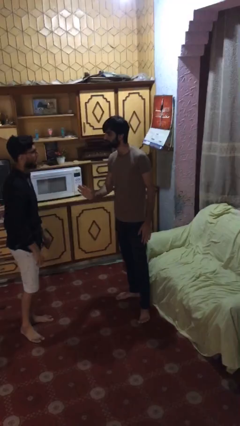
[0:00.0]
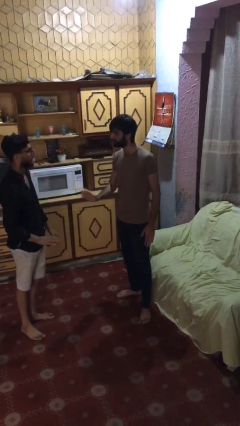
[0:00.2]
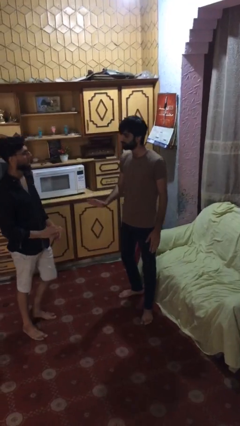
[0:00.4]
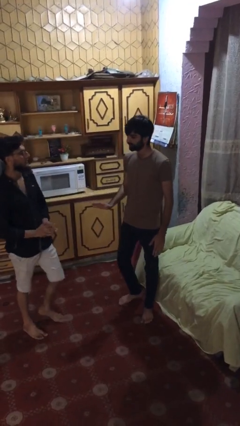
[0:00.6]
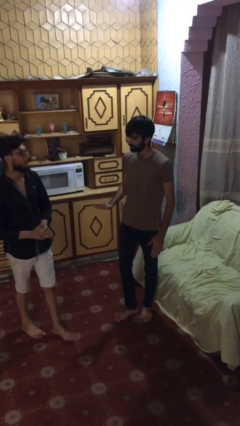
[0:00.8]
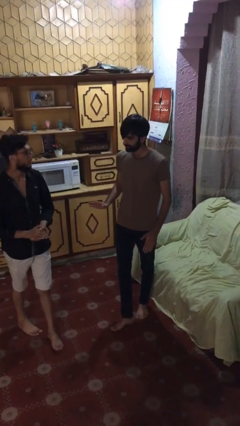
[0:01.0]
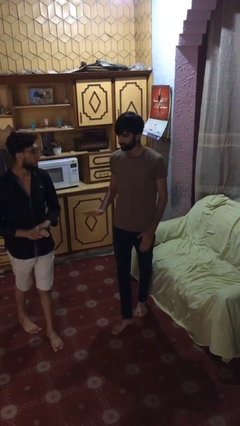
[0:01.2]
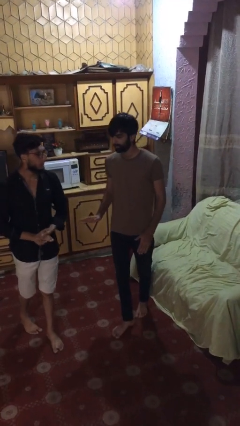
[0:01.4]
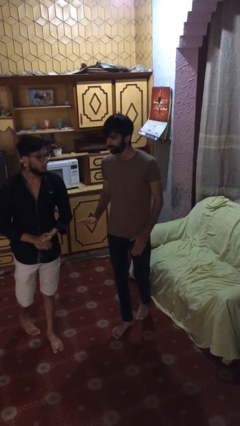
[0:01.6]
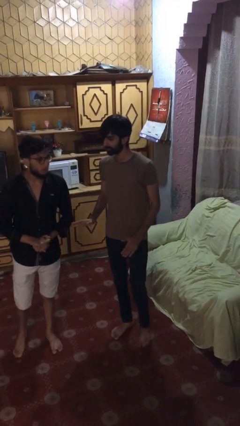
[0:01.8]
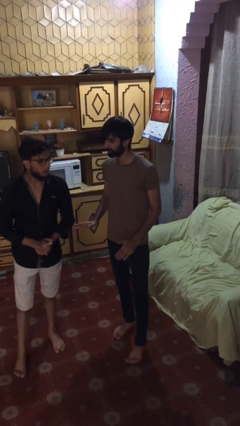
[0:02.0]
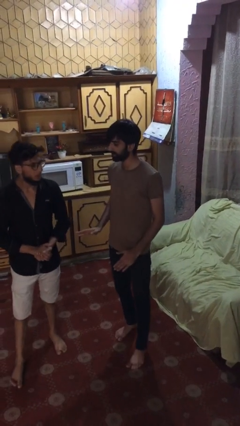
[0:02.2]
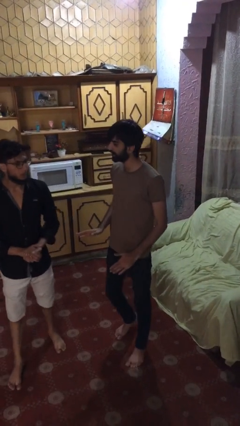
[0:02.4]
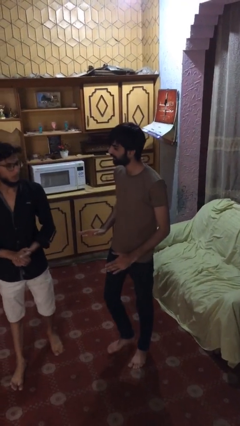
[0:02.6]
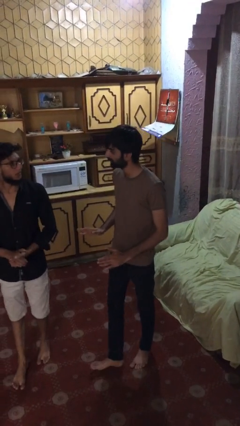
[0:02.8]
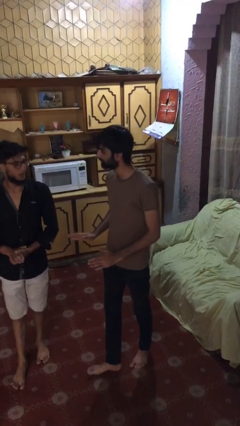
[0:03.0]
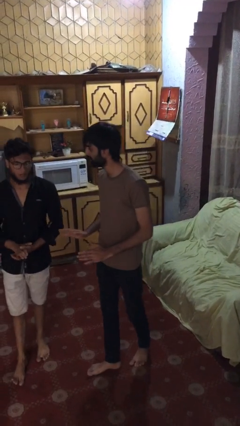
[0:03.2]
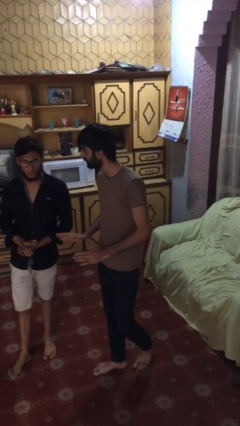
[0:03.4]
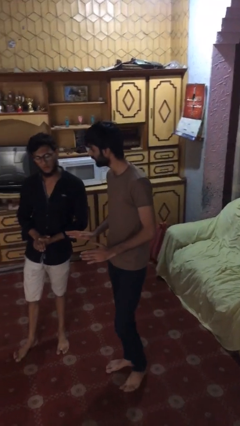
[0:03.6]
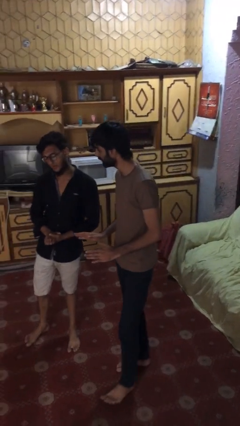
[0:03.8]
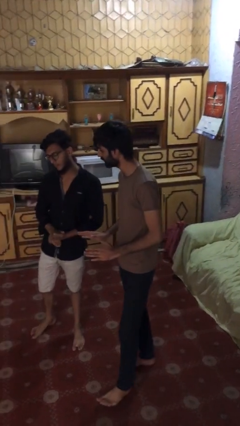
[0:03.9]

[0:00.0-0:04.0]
person talks to person

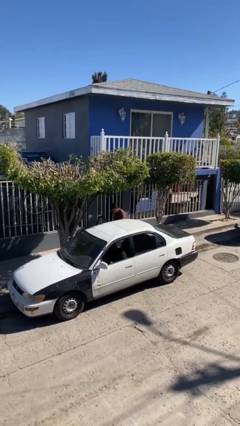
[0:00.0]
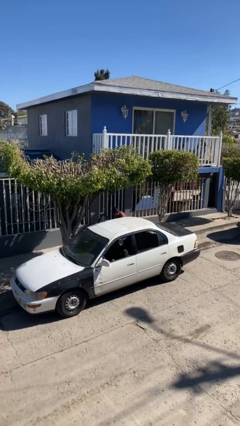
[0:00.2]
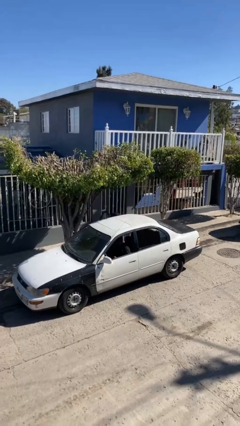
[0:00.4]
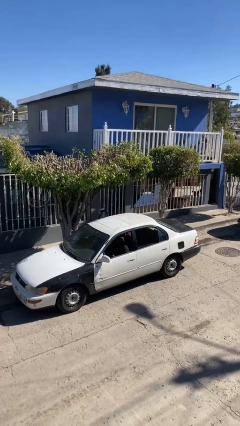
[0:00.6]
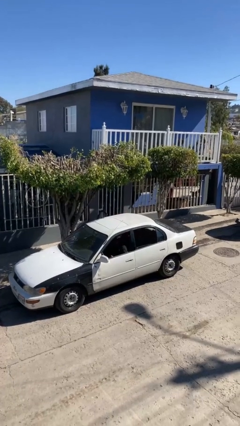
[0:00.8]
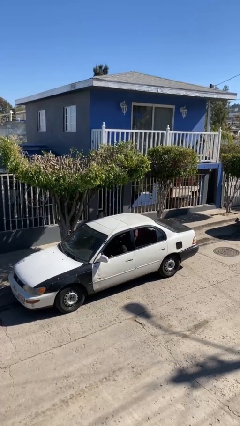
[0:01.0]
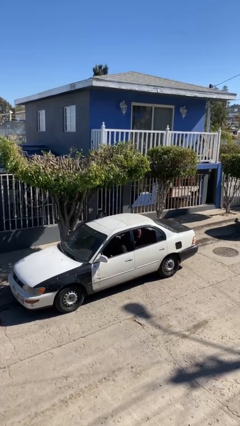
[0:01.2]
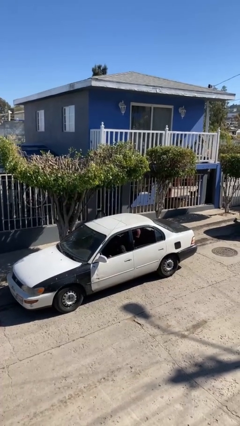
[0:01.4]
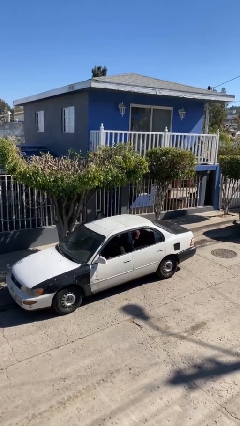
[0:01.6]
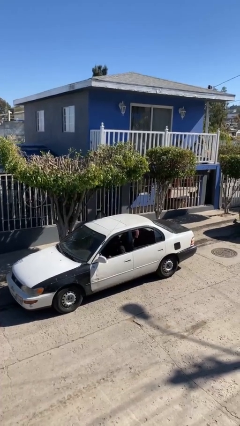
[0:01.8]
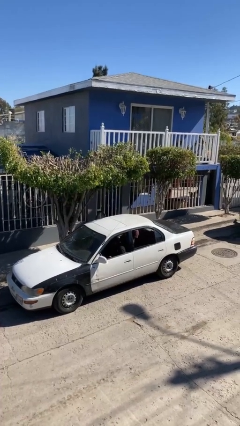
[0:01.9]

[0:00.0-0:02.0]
person enters car

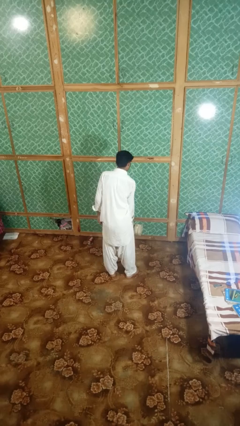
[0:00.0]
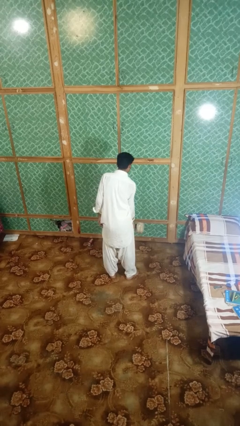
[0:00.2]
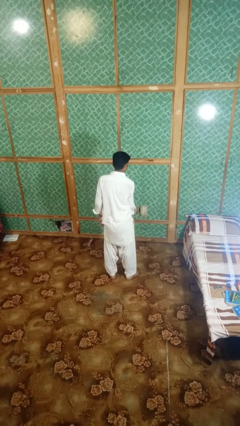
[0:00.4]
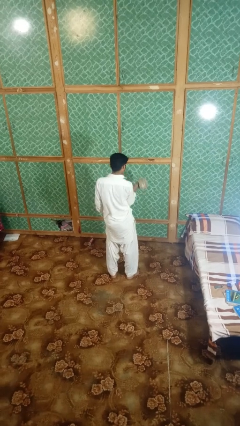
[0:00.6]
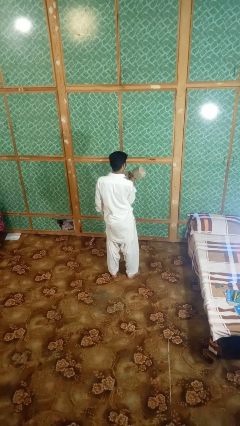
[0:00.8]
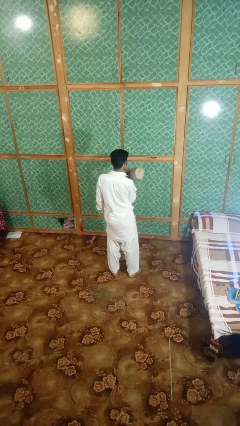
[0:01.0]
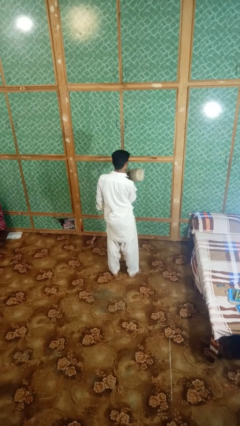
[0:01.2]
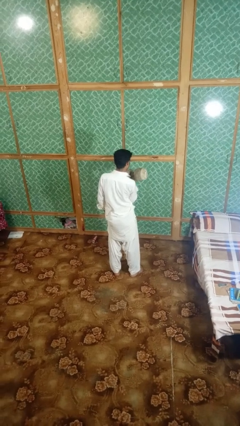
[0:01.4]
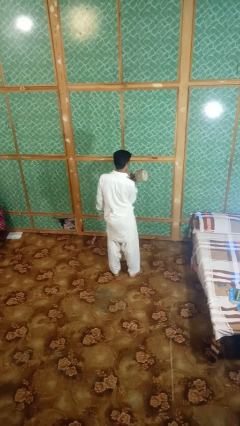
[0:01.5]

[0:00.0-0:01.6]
person lifts dumbbells

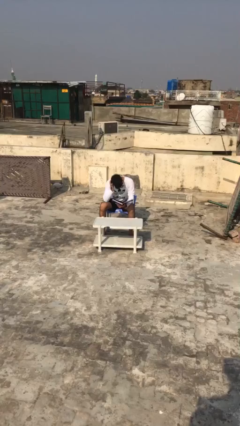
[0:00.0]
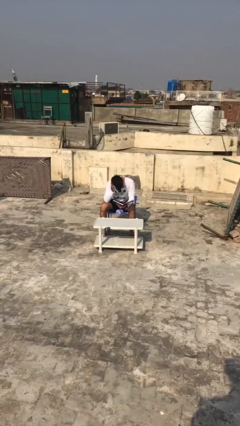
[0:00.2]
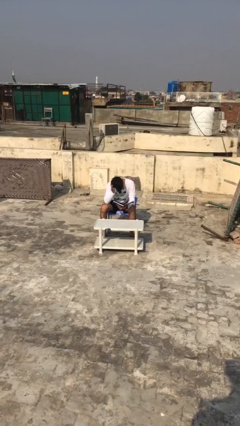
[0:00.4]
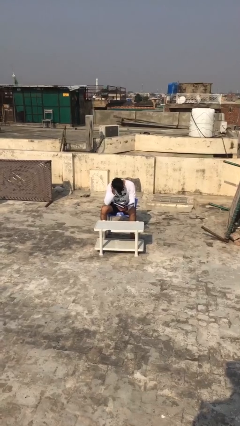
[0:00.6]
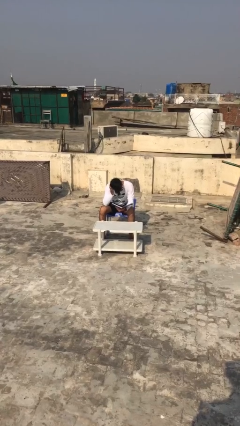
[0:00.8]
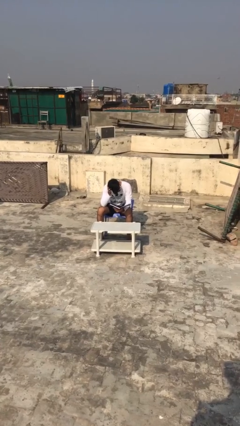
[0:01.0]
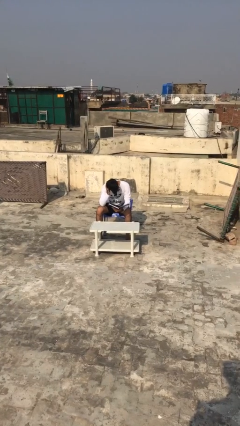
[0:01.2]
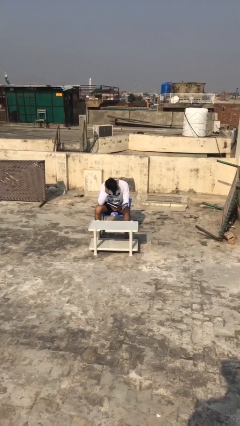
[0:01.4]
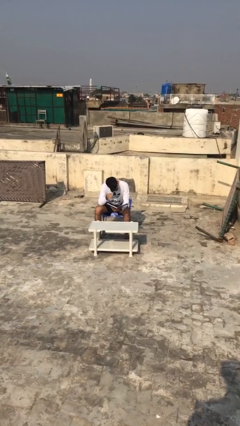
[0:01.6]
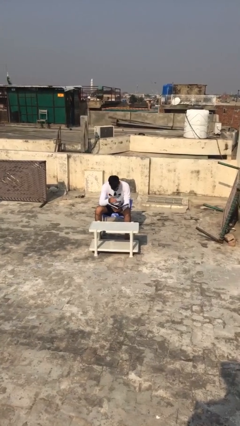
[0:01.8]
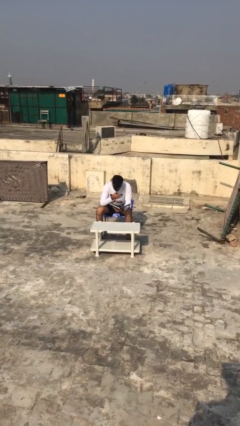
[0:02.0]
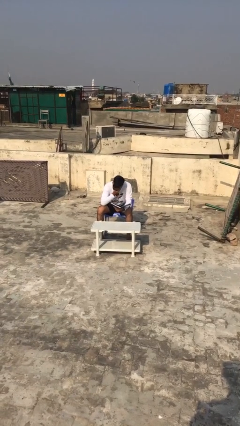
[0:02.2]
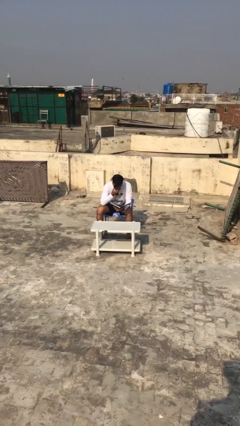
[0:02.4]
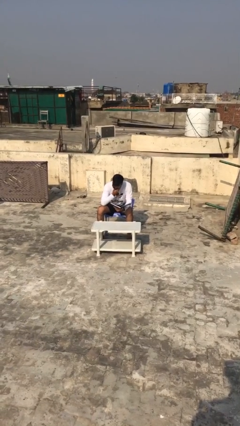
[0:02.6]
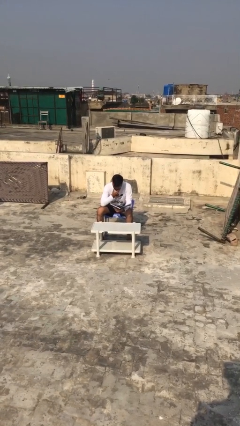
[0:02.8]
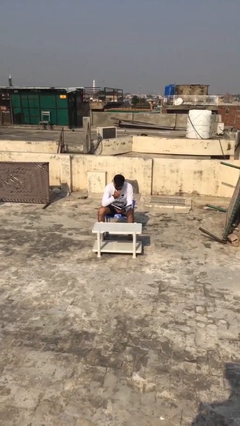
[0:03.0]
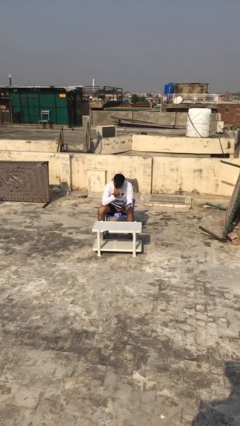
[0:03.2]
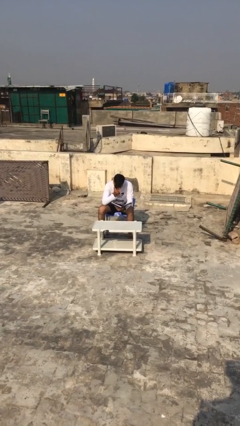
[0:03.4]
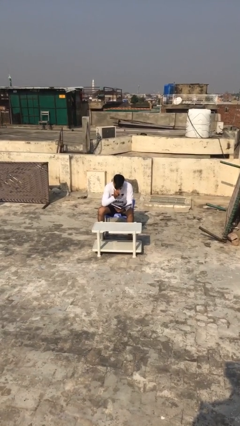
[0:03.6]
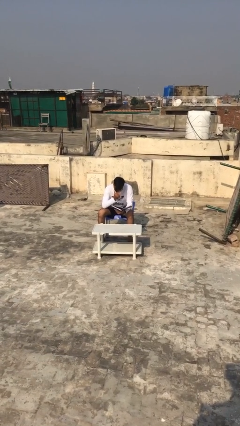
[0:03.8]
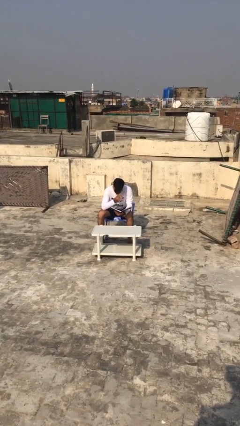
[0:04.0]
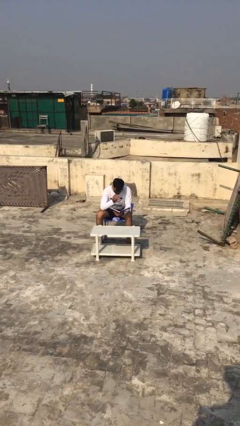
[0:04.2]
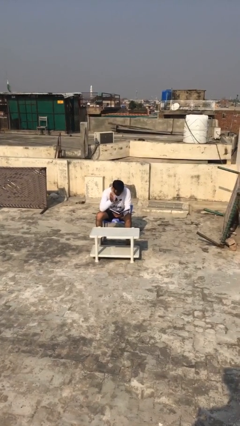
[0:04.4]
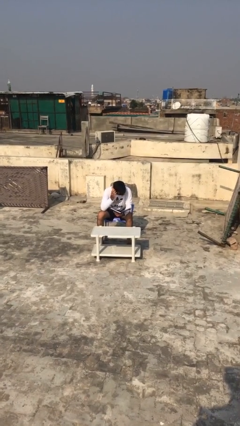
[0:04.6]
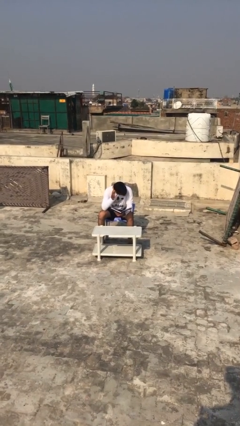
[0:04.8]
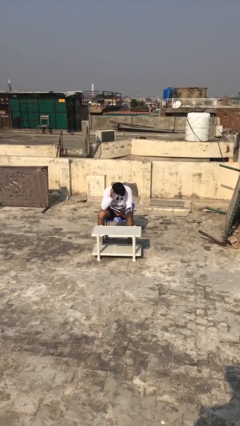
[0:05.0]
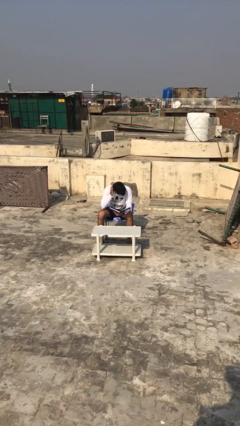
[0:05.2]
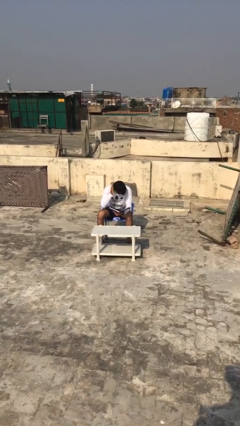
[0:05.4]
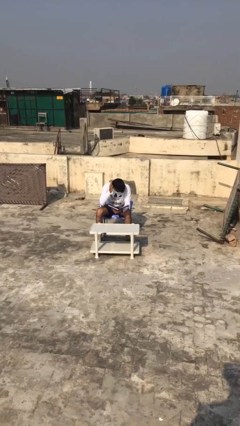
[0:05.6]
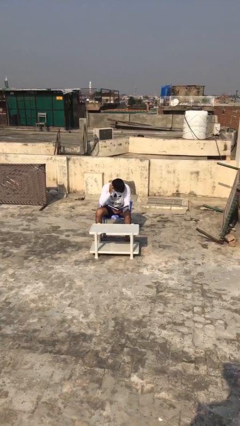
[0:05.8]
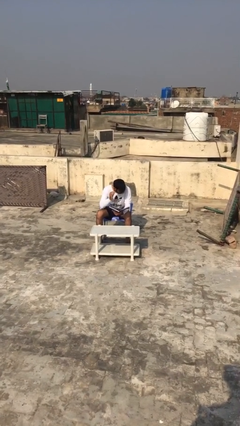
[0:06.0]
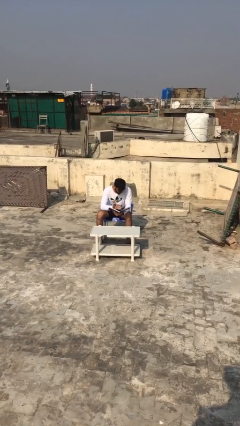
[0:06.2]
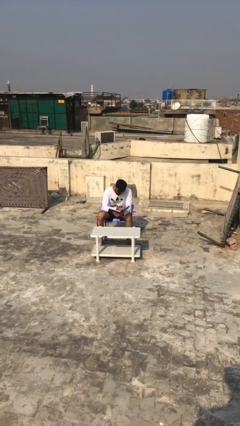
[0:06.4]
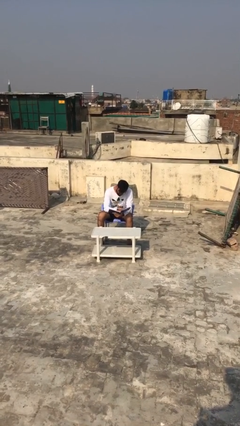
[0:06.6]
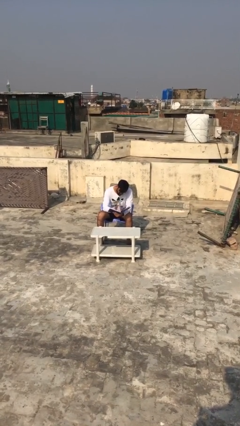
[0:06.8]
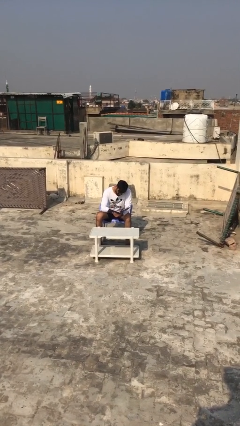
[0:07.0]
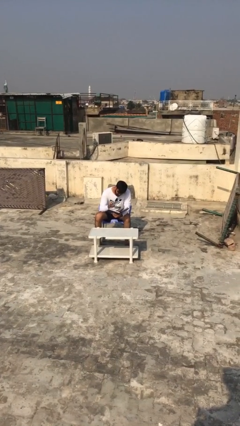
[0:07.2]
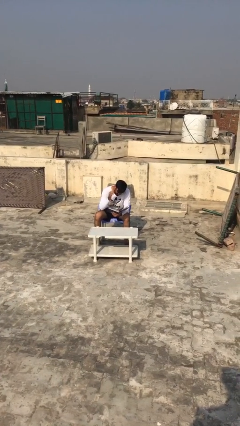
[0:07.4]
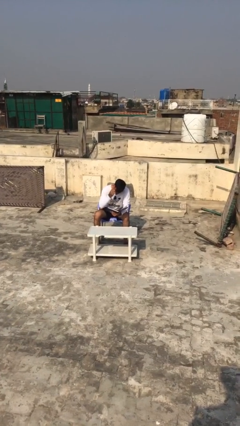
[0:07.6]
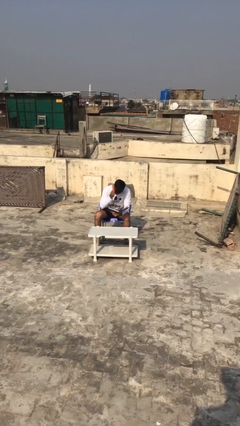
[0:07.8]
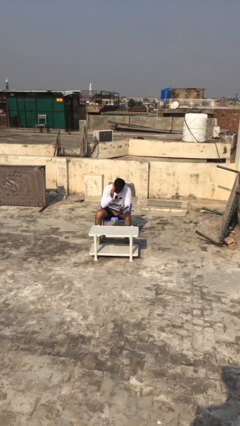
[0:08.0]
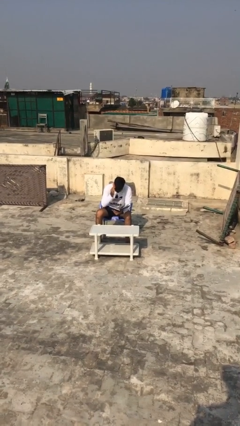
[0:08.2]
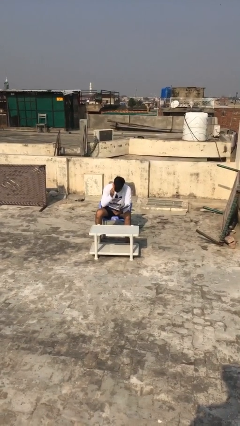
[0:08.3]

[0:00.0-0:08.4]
person reads document

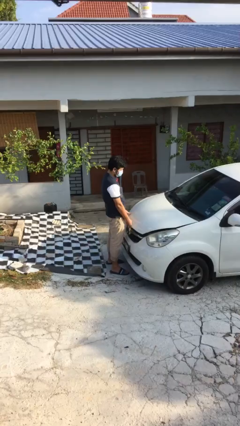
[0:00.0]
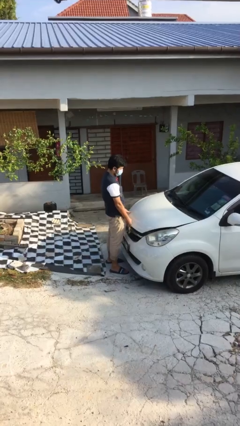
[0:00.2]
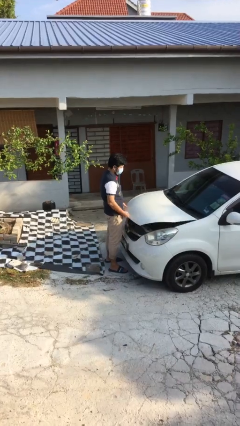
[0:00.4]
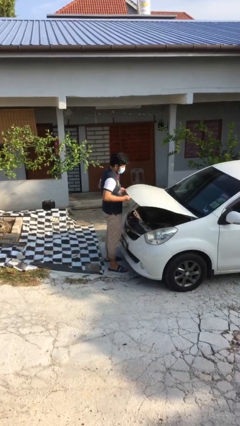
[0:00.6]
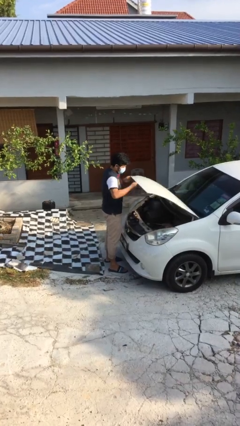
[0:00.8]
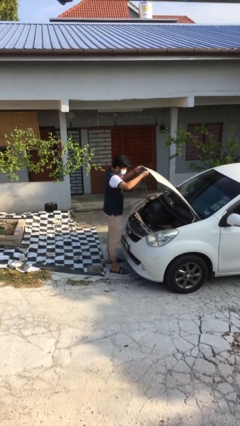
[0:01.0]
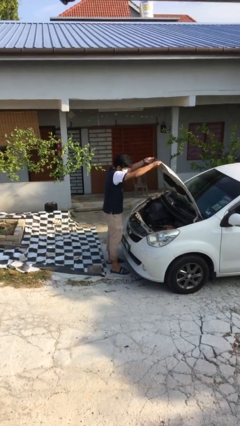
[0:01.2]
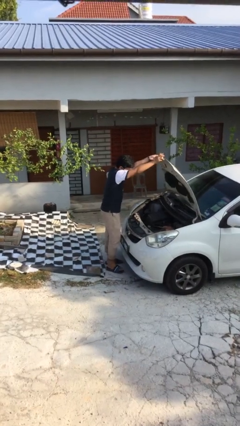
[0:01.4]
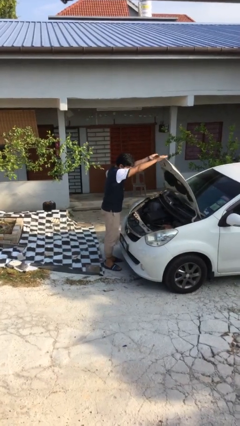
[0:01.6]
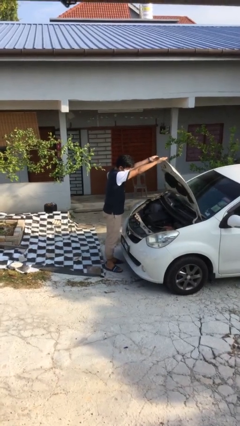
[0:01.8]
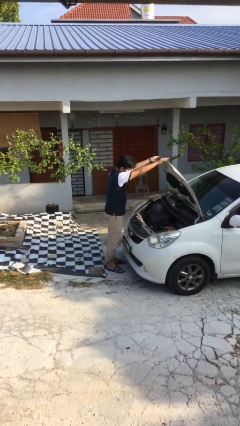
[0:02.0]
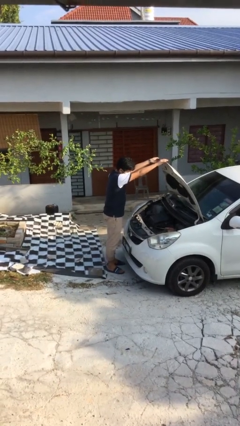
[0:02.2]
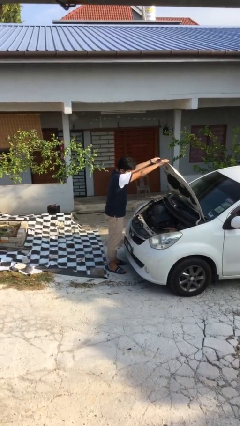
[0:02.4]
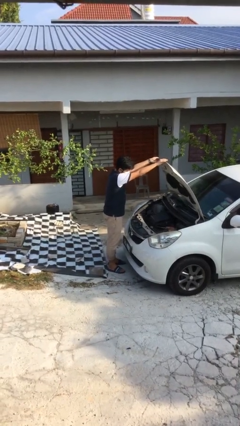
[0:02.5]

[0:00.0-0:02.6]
person opens car hood
